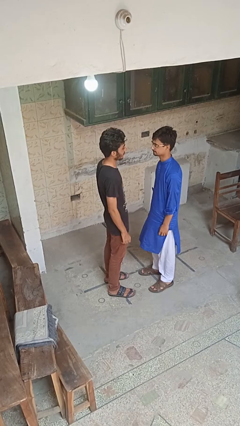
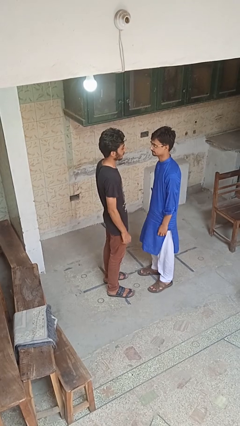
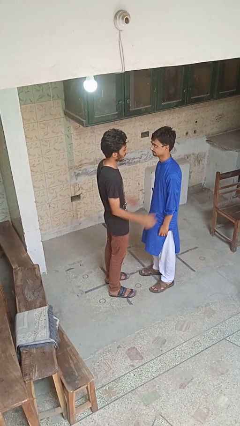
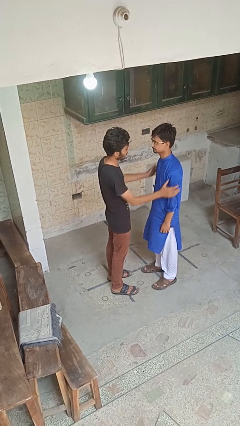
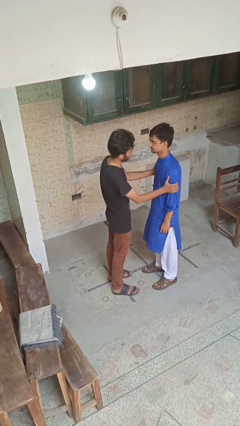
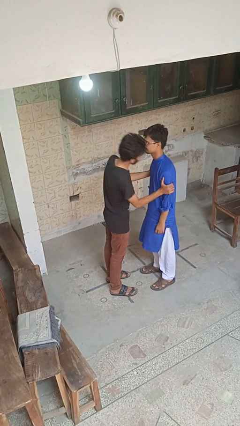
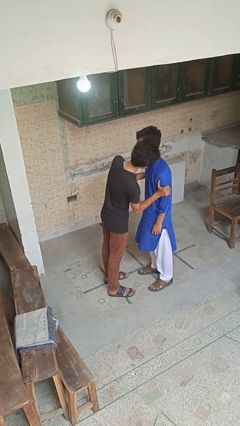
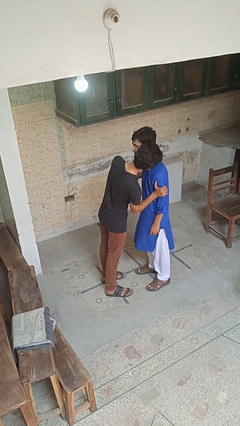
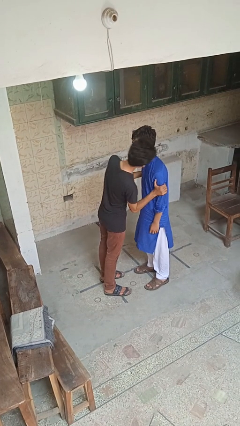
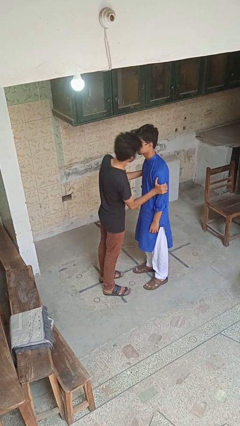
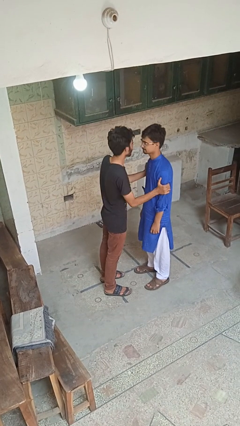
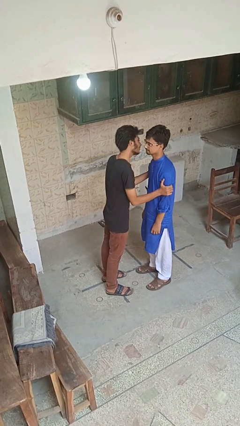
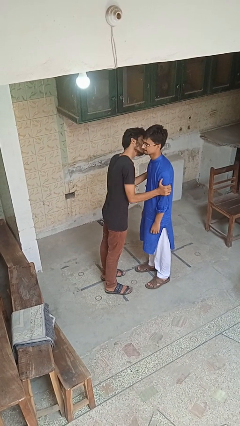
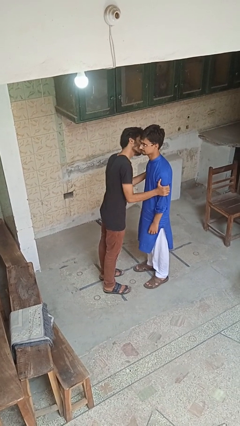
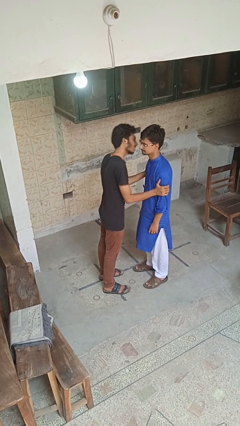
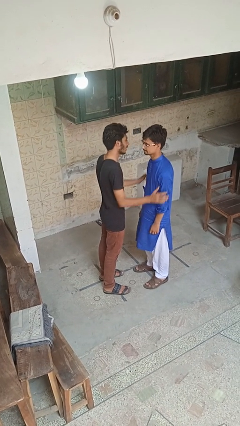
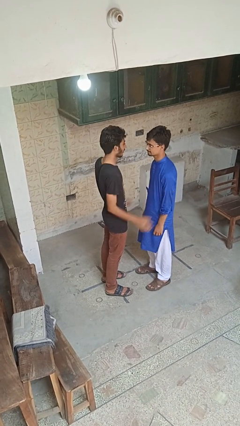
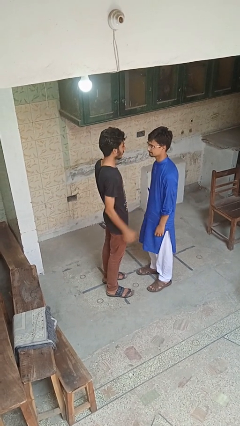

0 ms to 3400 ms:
person kisses cheek of person

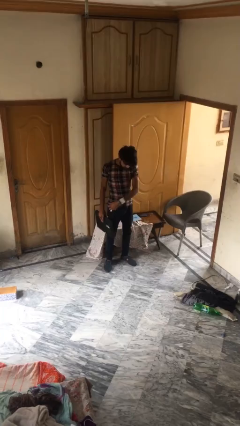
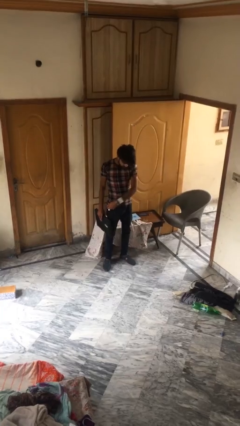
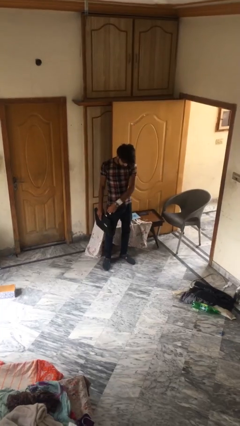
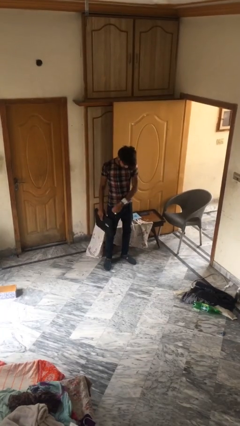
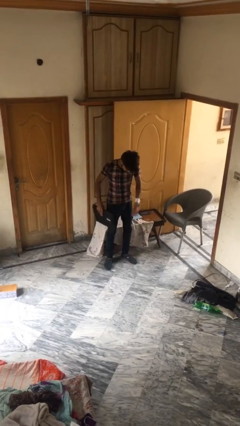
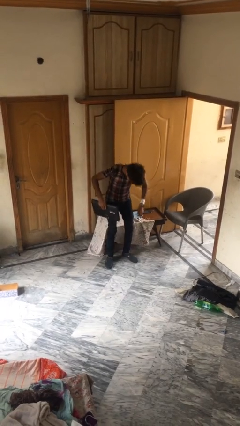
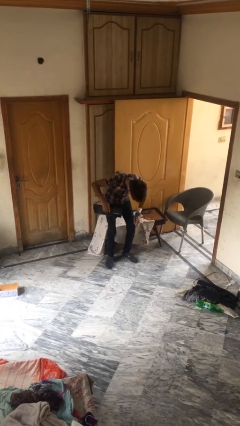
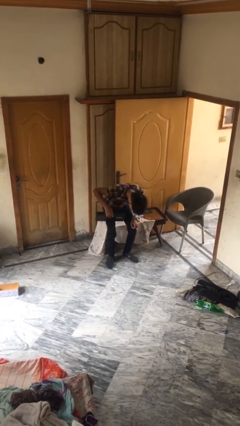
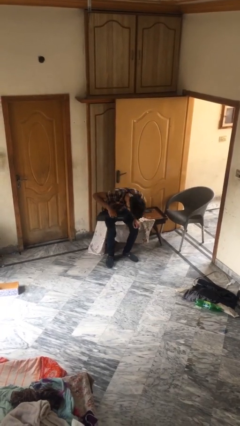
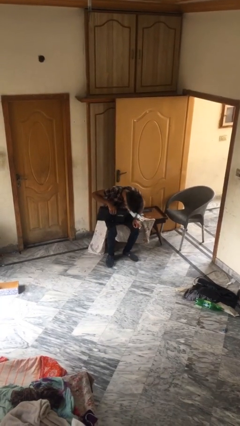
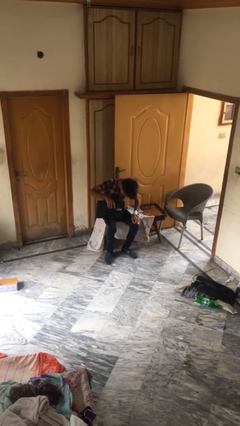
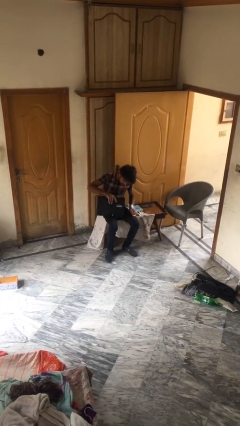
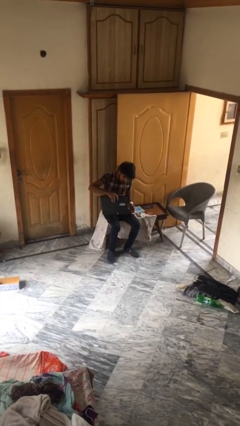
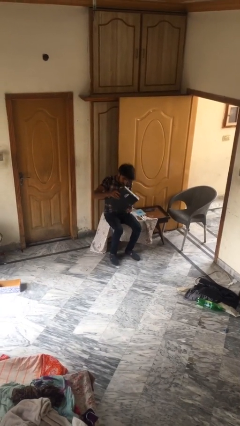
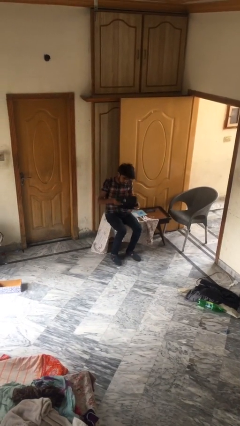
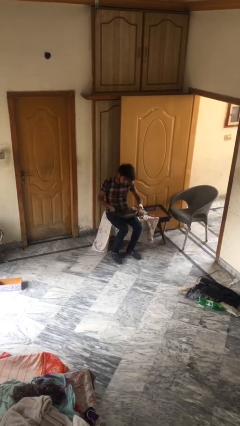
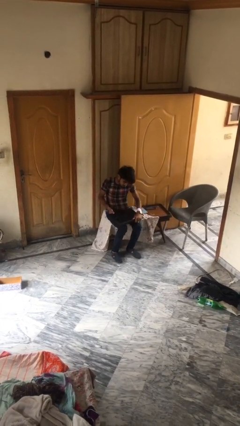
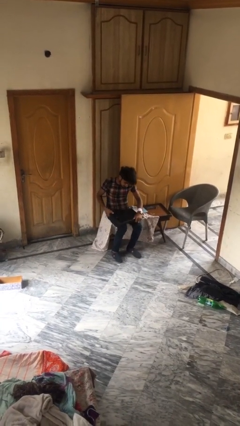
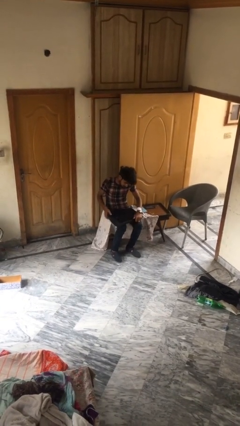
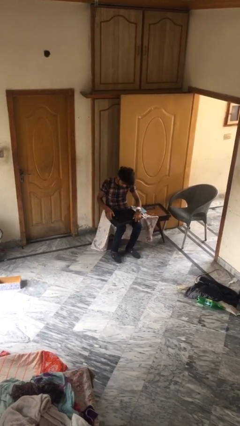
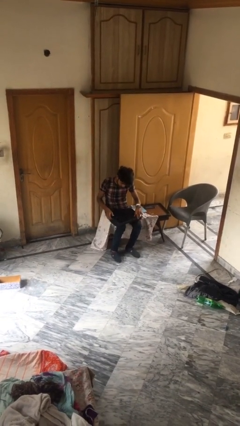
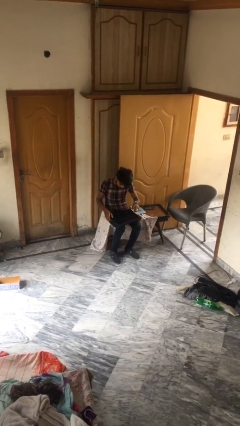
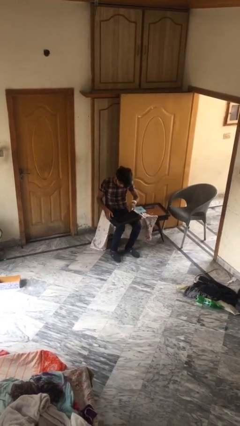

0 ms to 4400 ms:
person sits down

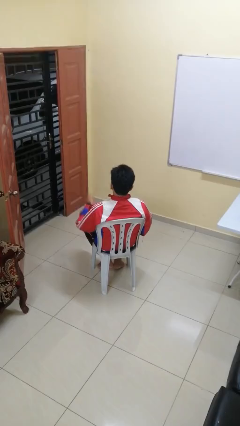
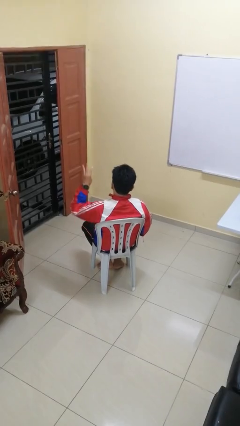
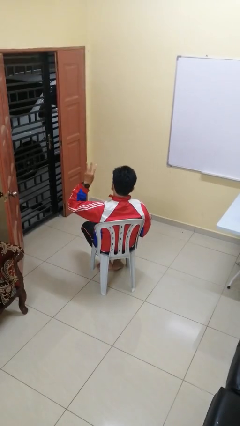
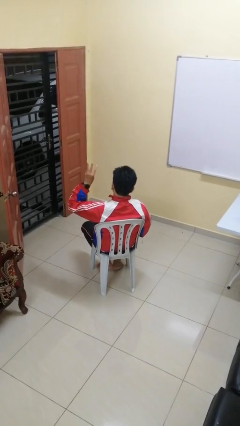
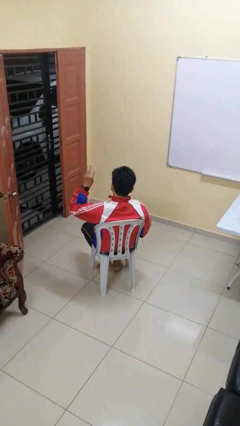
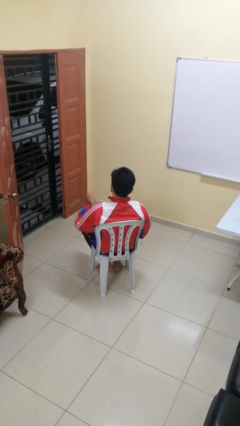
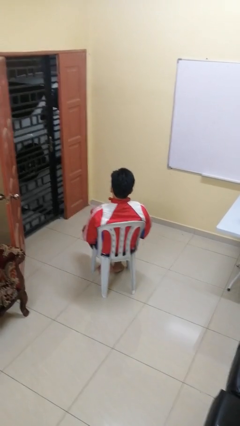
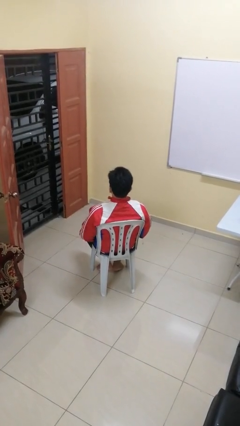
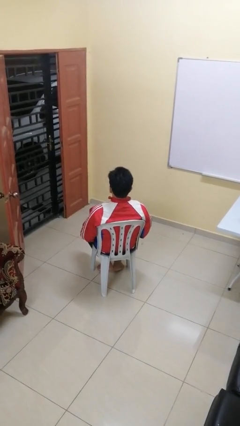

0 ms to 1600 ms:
person gestures number three

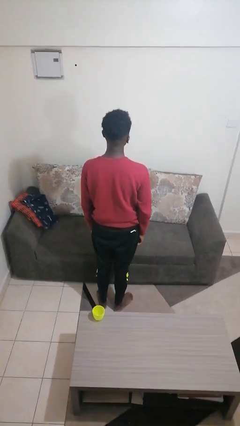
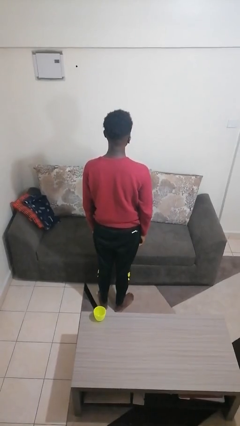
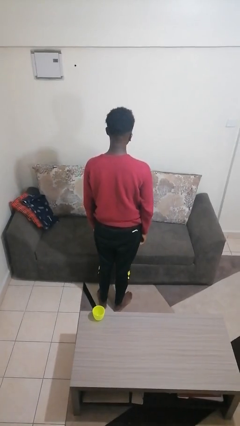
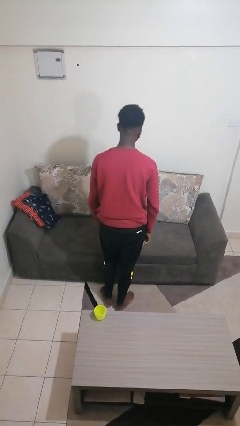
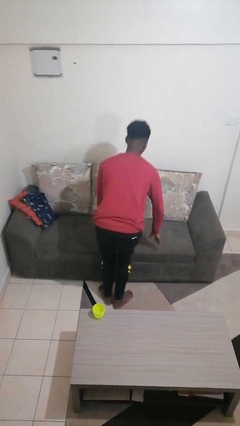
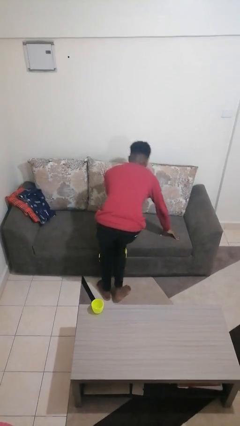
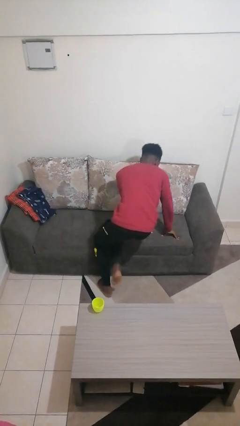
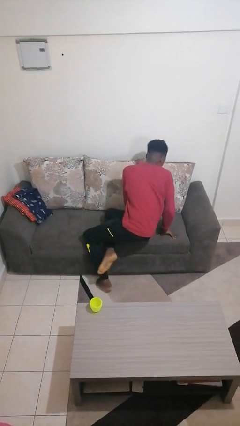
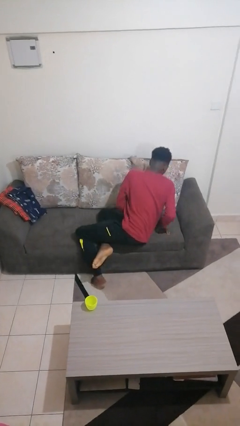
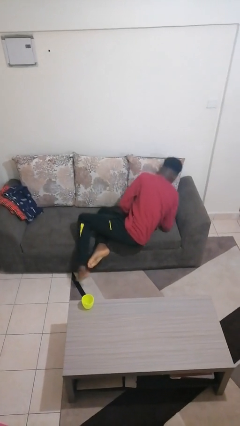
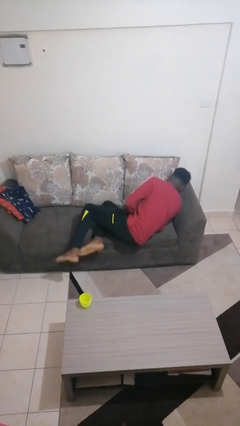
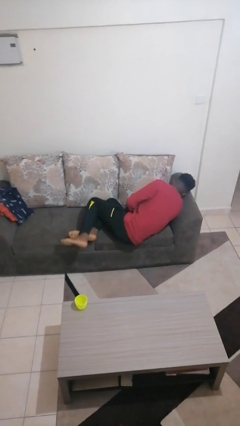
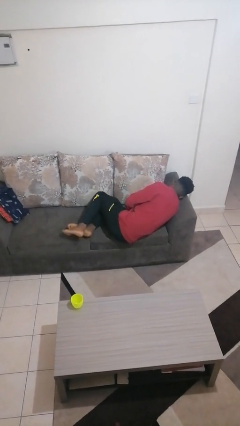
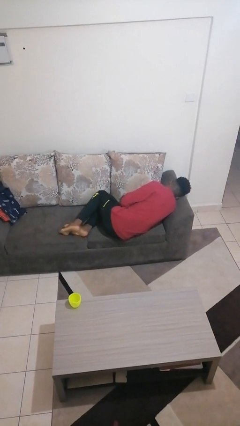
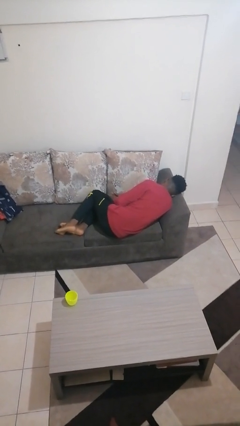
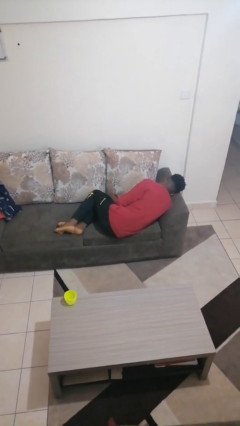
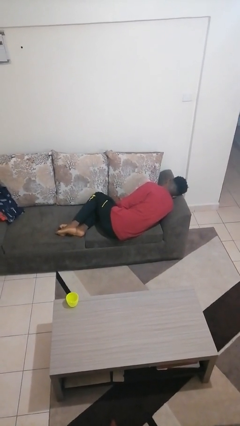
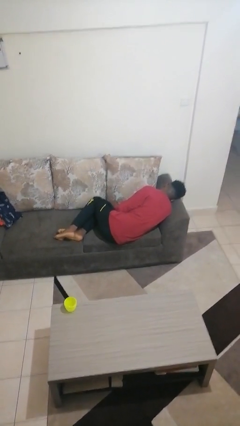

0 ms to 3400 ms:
person lies down on couch

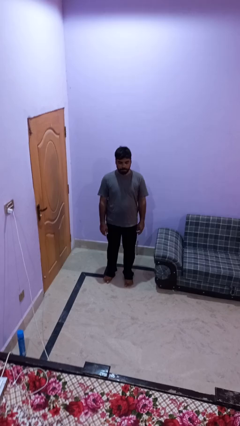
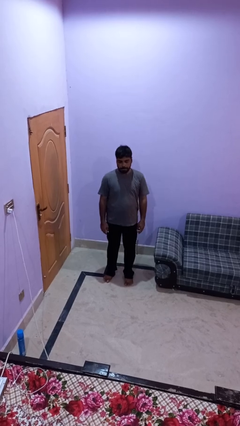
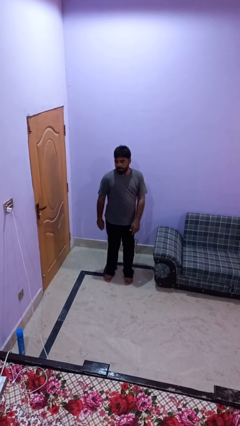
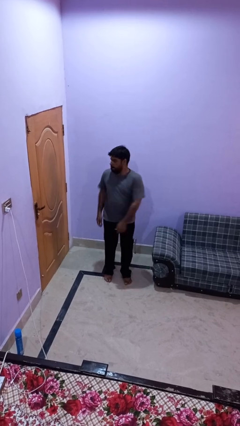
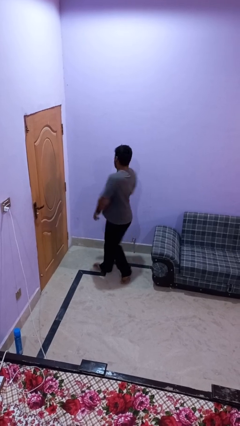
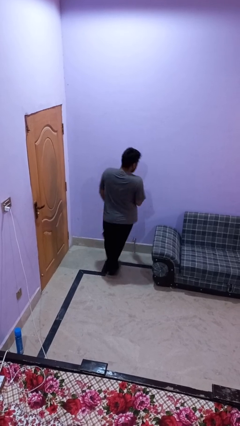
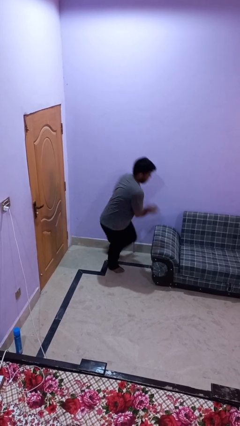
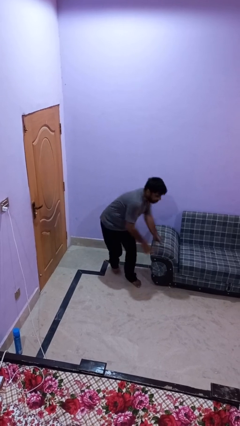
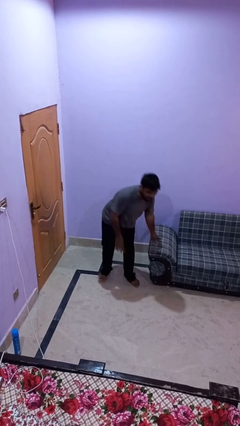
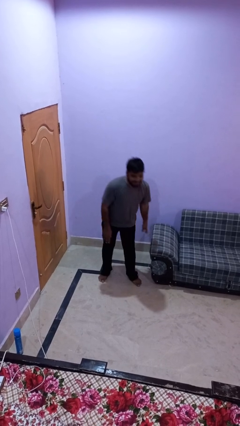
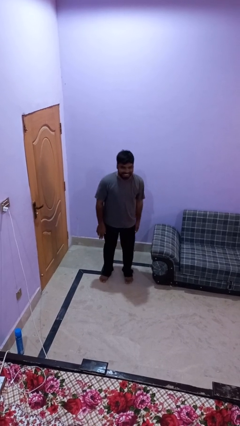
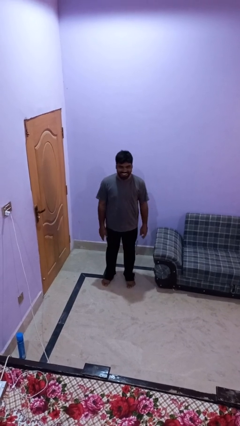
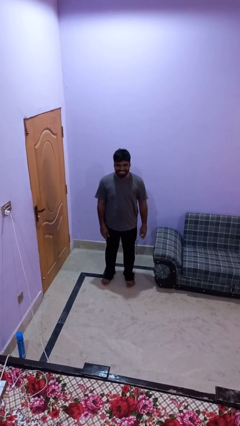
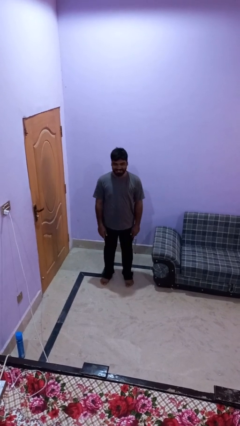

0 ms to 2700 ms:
person twirls

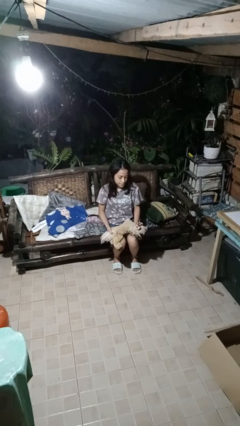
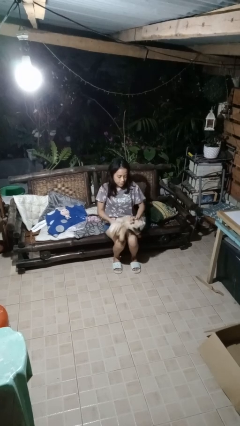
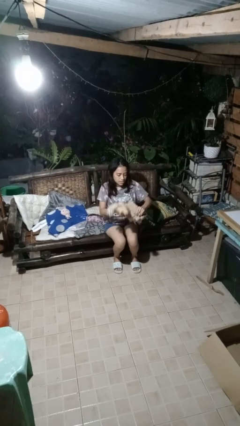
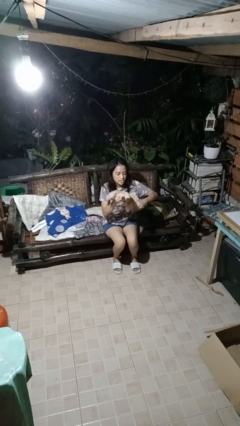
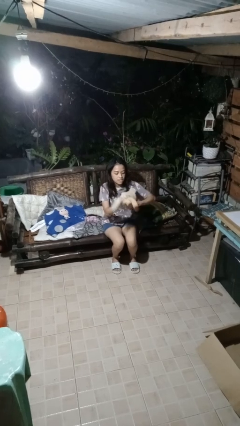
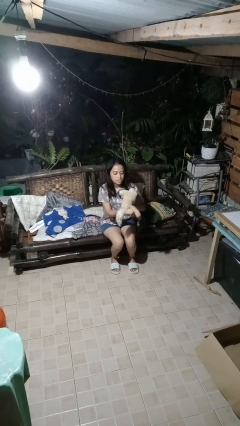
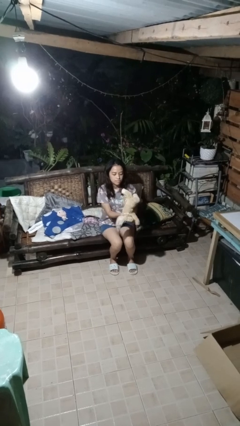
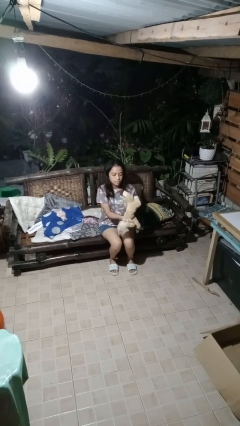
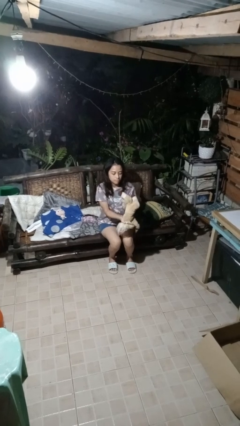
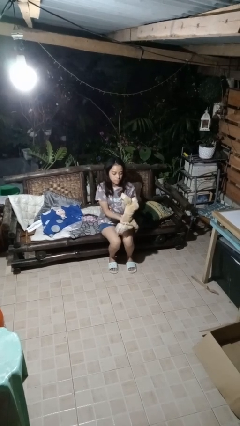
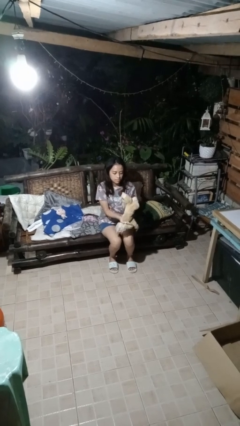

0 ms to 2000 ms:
person squeezes object
